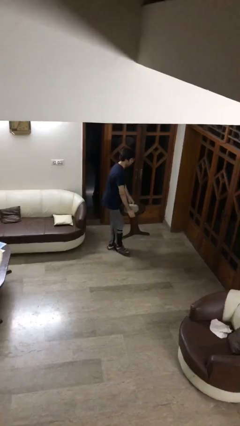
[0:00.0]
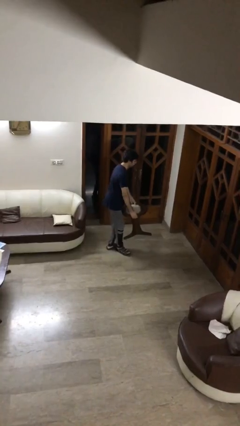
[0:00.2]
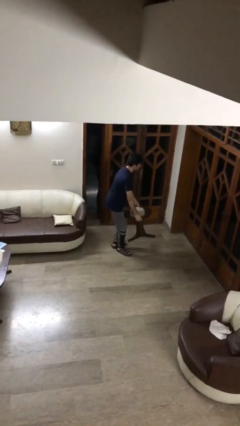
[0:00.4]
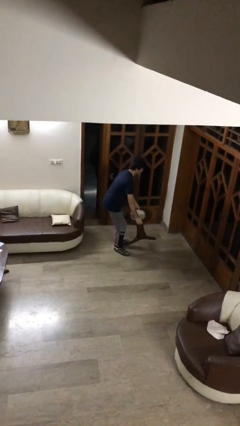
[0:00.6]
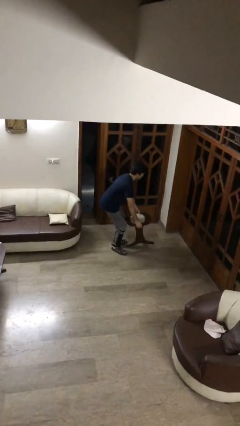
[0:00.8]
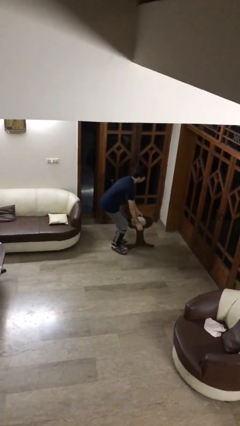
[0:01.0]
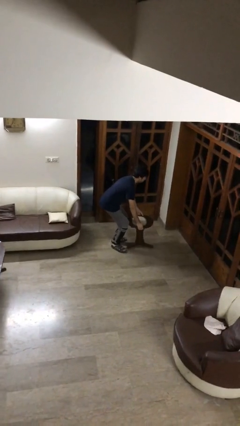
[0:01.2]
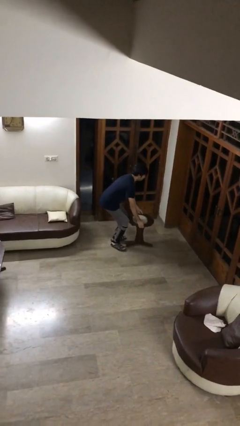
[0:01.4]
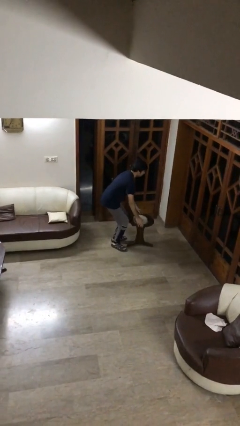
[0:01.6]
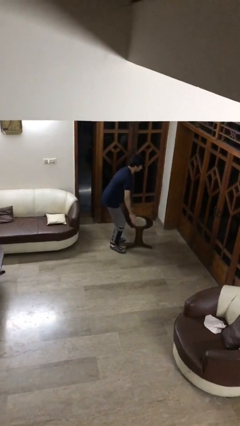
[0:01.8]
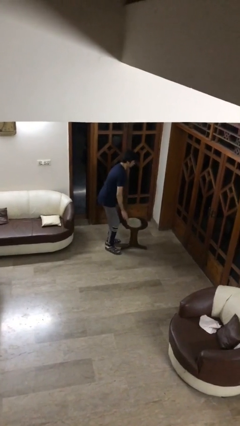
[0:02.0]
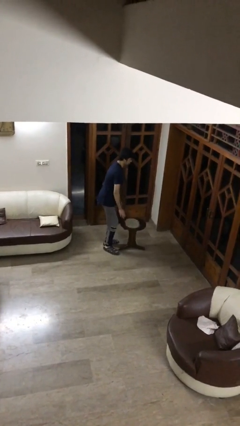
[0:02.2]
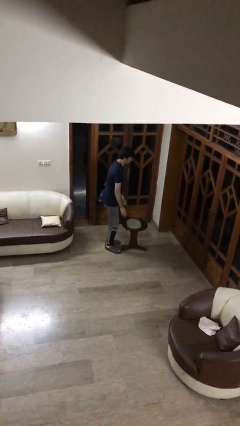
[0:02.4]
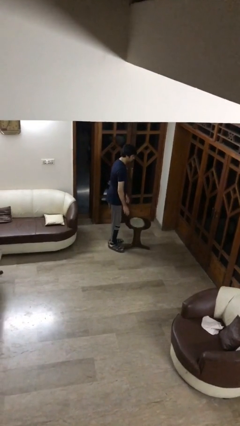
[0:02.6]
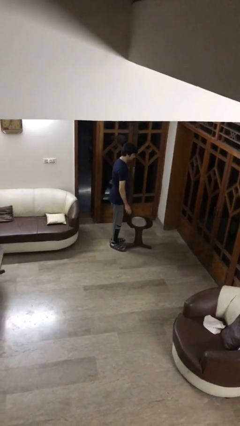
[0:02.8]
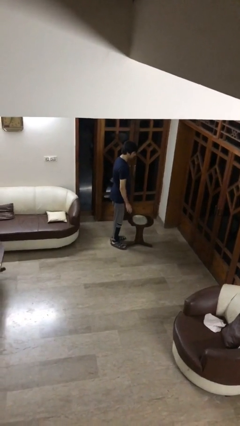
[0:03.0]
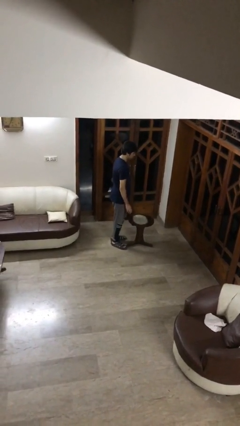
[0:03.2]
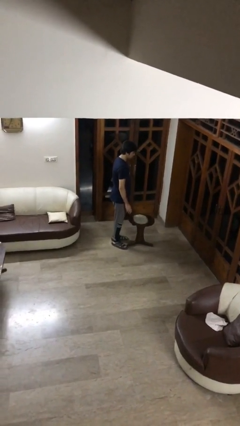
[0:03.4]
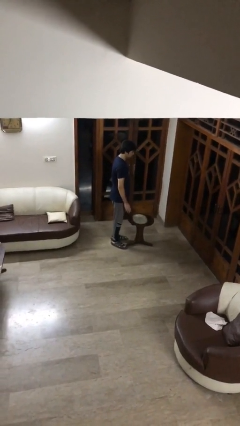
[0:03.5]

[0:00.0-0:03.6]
person puts down object on floor

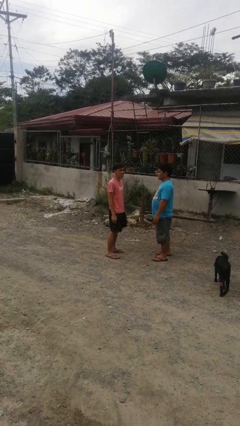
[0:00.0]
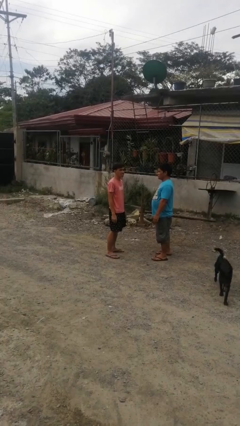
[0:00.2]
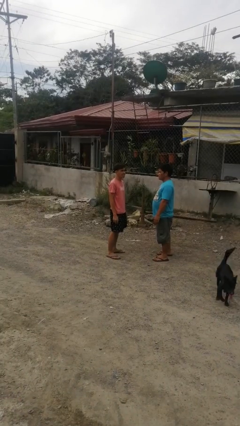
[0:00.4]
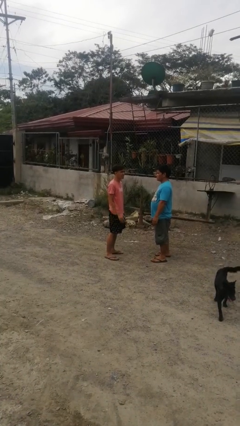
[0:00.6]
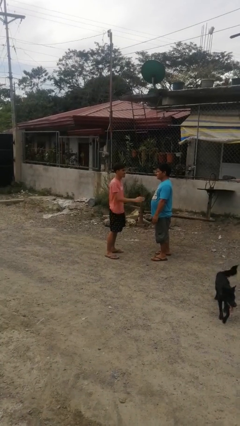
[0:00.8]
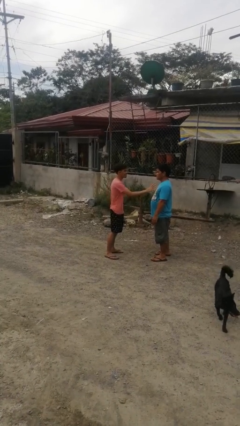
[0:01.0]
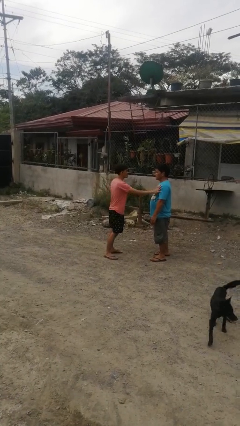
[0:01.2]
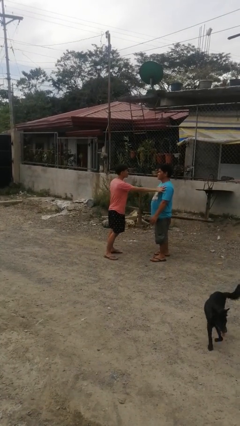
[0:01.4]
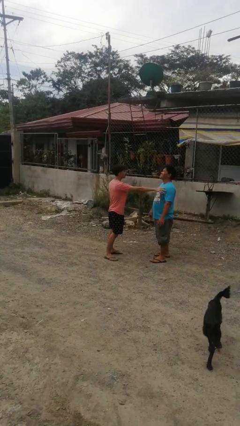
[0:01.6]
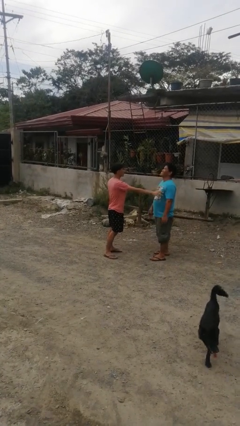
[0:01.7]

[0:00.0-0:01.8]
person shoves person

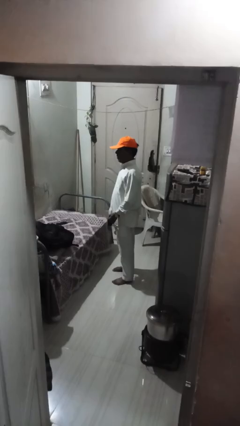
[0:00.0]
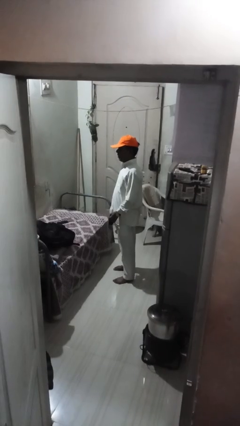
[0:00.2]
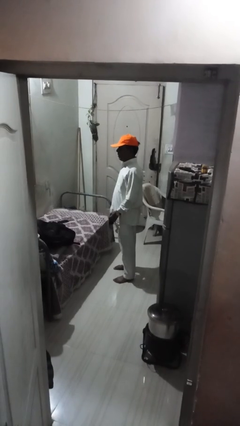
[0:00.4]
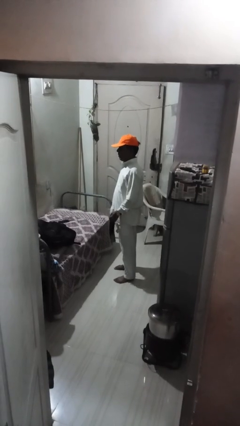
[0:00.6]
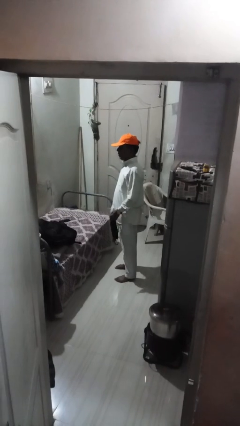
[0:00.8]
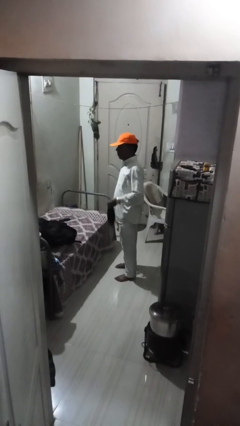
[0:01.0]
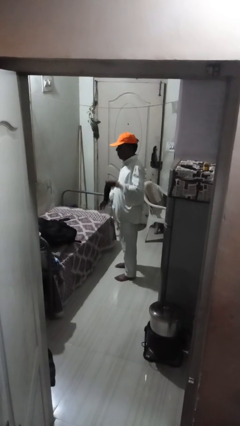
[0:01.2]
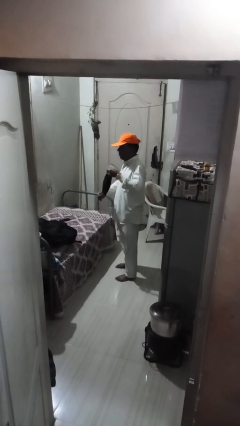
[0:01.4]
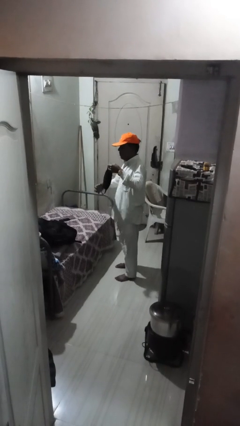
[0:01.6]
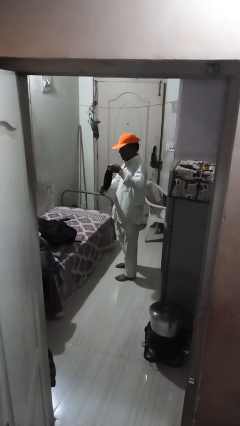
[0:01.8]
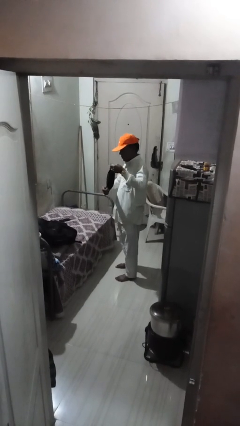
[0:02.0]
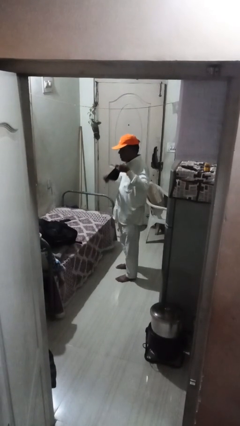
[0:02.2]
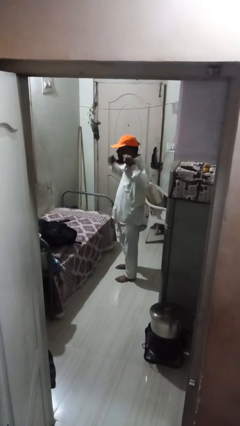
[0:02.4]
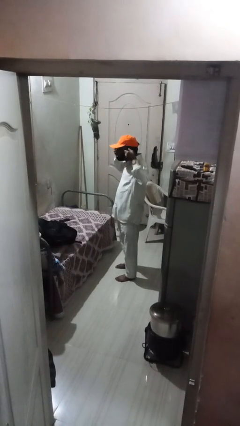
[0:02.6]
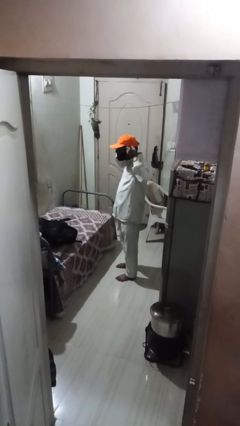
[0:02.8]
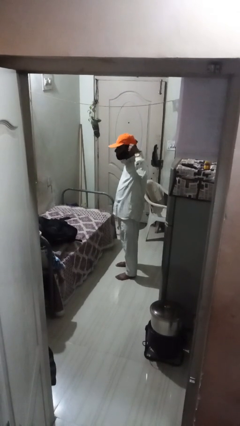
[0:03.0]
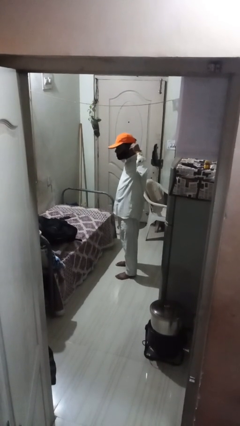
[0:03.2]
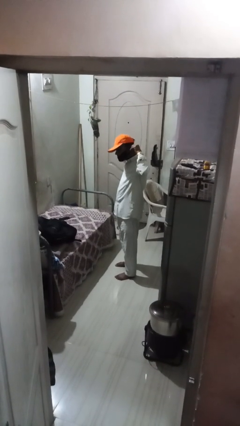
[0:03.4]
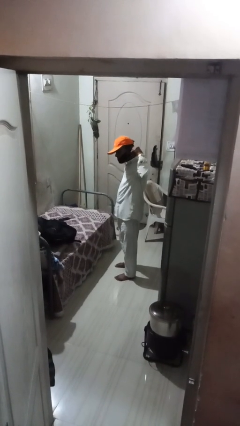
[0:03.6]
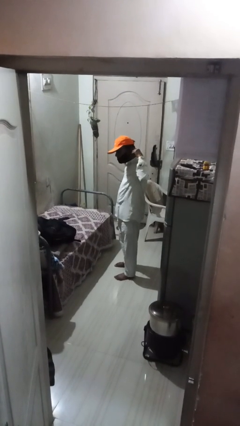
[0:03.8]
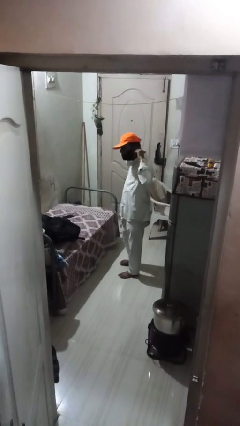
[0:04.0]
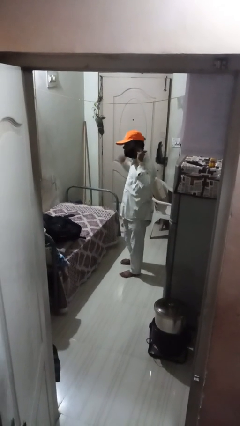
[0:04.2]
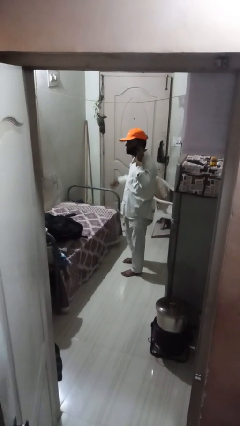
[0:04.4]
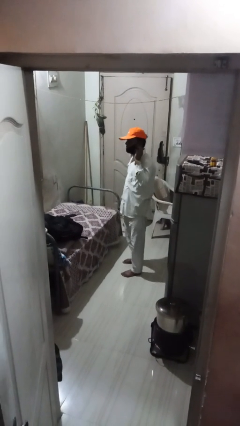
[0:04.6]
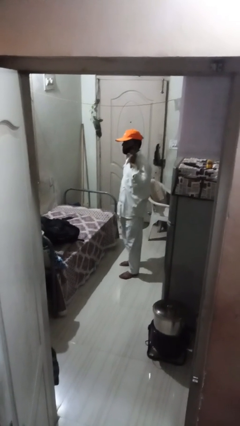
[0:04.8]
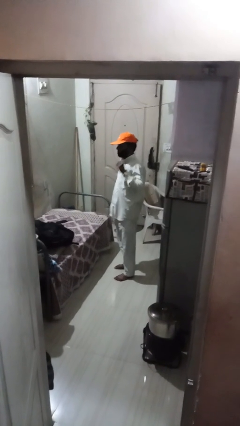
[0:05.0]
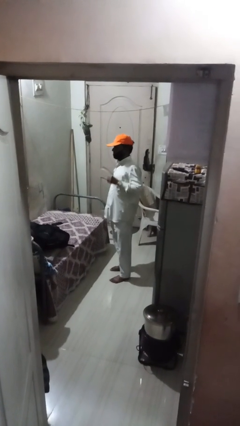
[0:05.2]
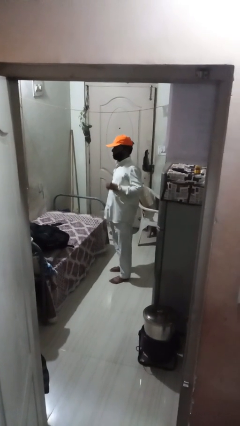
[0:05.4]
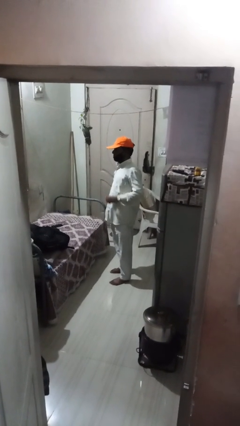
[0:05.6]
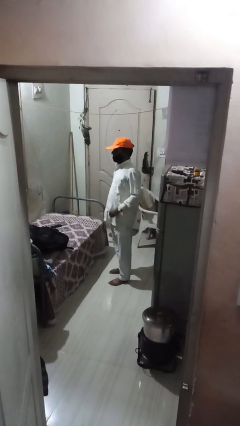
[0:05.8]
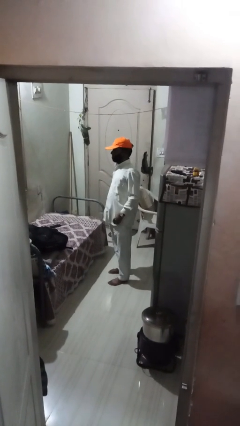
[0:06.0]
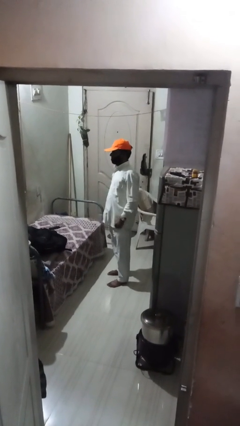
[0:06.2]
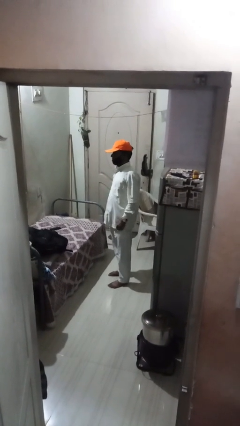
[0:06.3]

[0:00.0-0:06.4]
person puts on facemask

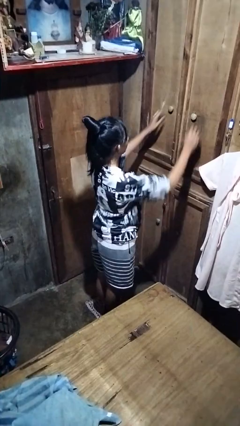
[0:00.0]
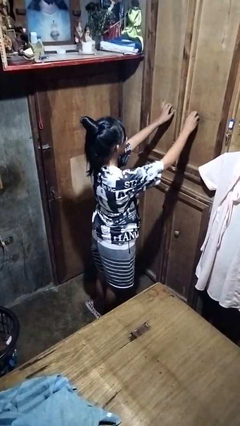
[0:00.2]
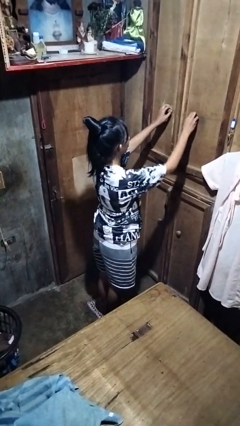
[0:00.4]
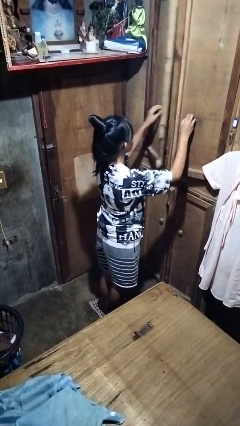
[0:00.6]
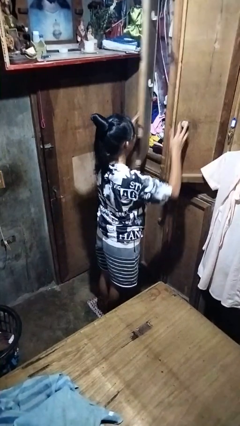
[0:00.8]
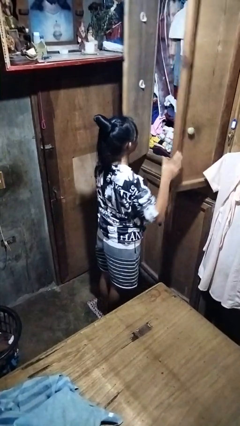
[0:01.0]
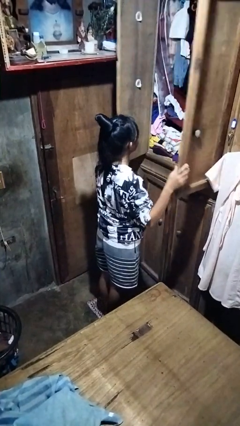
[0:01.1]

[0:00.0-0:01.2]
person opens closet door

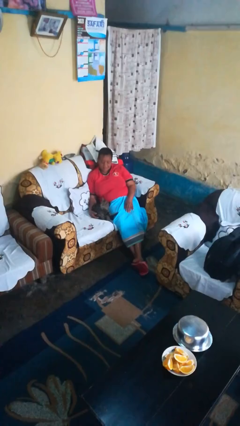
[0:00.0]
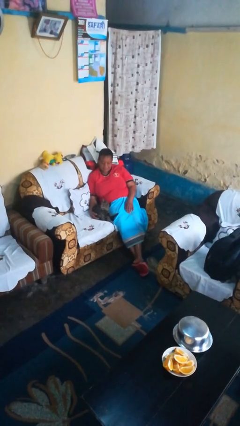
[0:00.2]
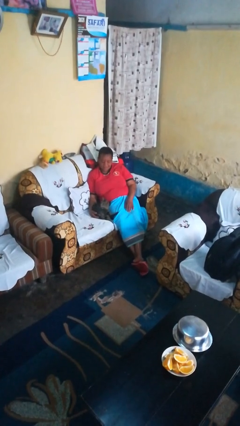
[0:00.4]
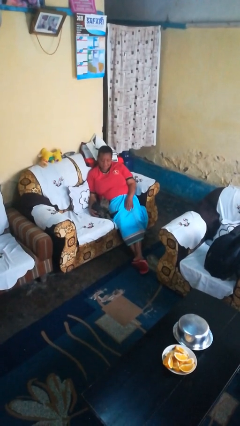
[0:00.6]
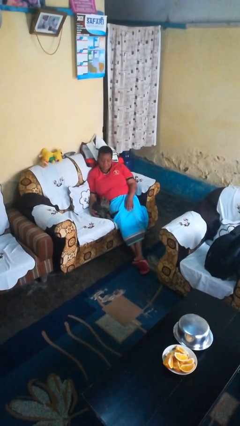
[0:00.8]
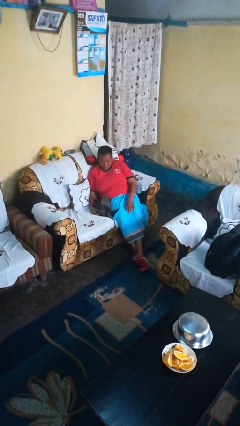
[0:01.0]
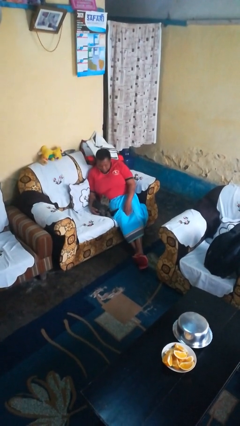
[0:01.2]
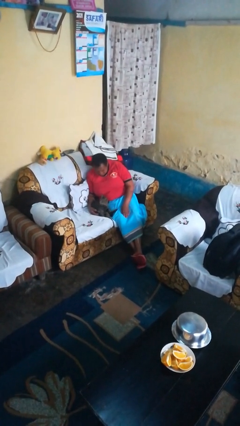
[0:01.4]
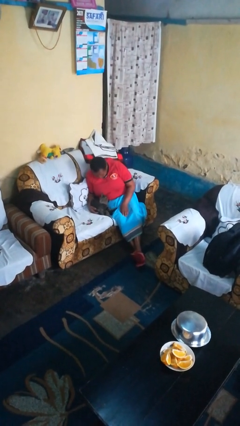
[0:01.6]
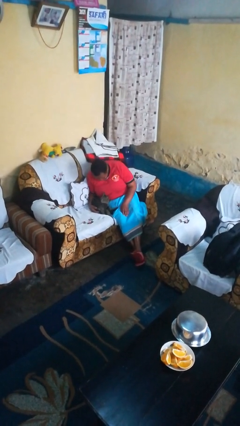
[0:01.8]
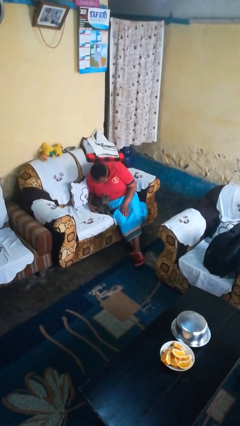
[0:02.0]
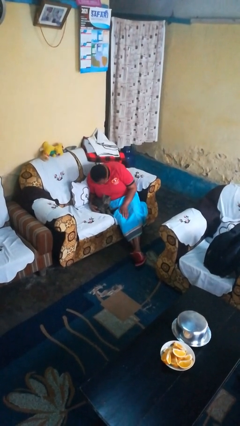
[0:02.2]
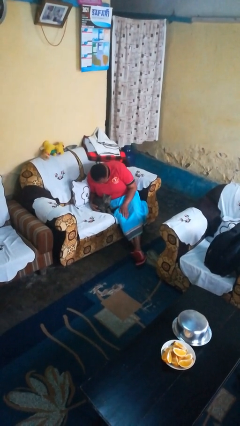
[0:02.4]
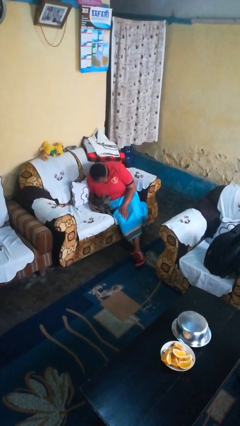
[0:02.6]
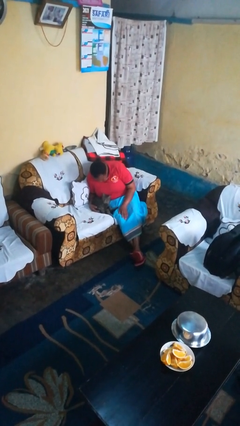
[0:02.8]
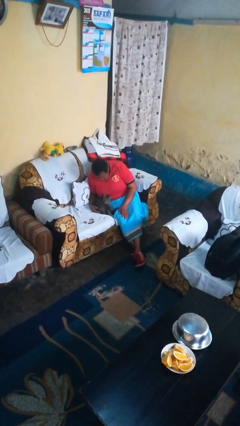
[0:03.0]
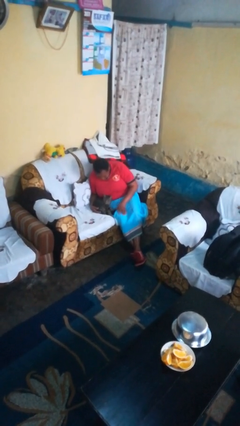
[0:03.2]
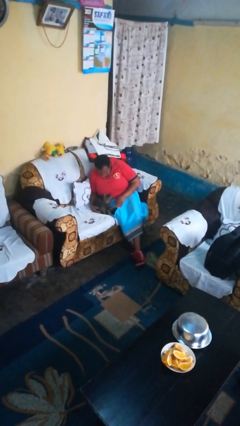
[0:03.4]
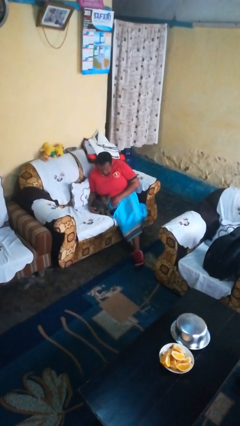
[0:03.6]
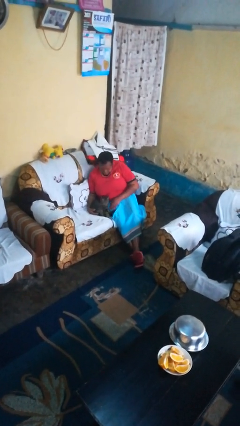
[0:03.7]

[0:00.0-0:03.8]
person hugs cat

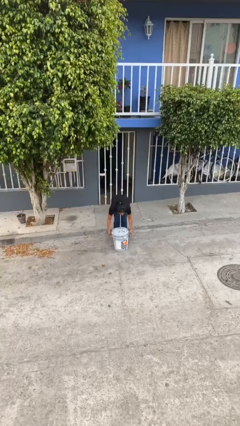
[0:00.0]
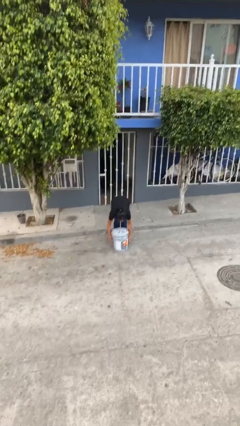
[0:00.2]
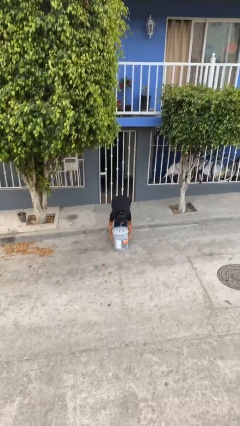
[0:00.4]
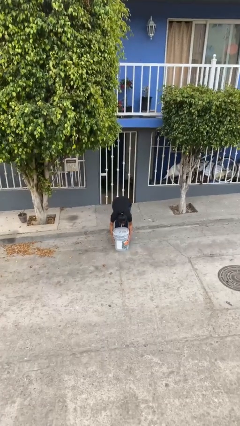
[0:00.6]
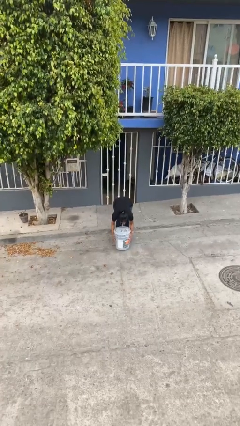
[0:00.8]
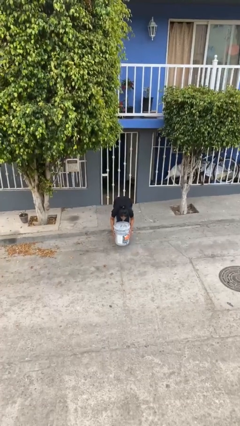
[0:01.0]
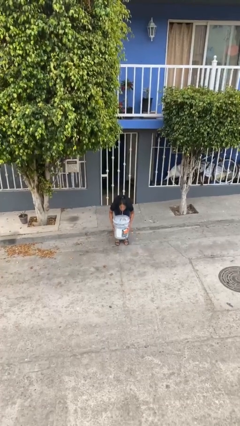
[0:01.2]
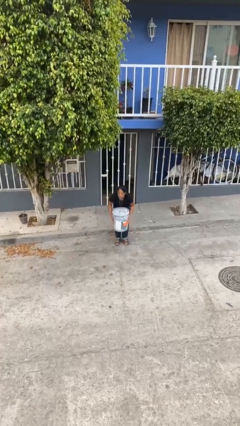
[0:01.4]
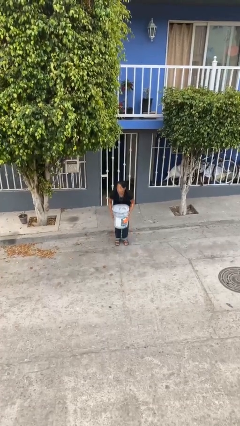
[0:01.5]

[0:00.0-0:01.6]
person picks up object from floor
